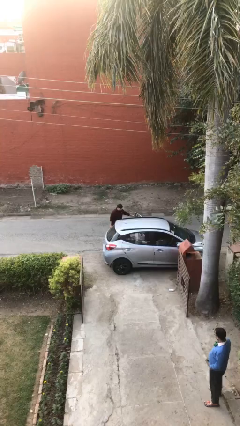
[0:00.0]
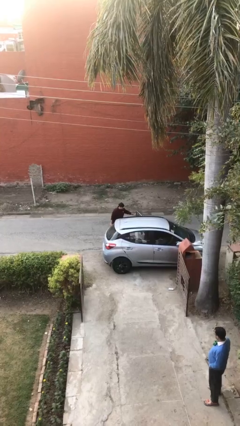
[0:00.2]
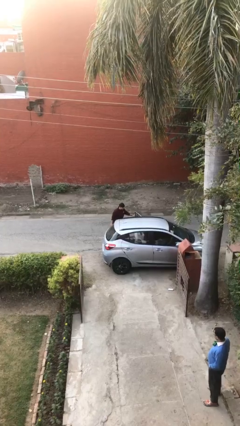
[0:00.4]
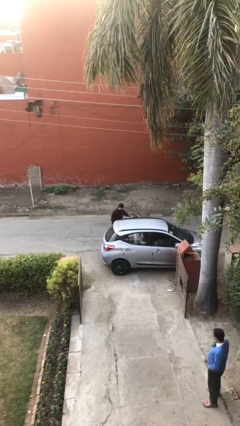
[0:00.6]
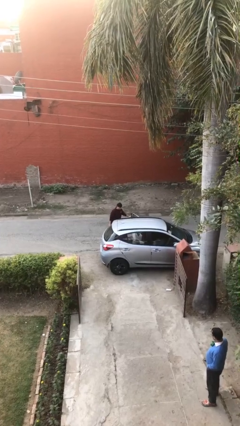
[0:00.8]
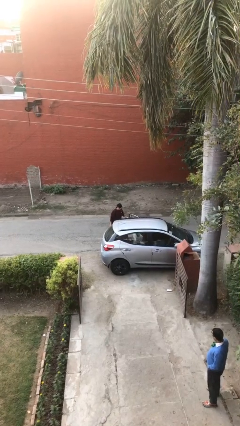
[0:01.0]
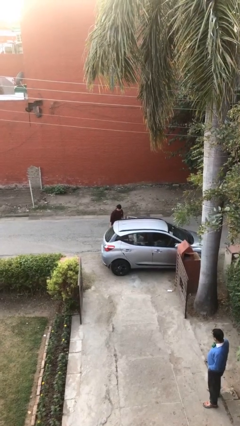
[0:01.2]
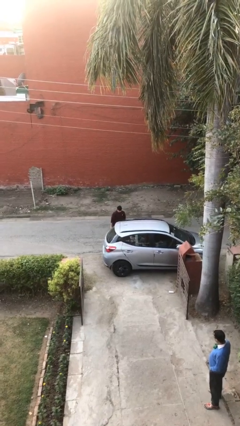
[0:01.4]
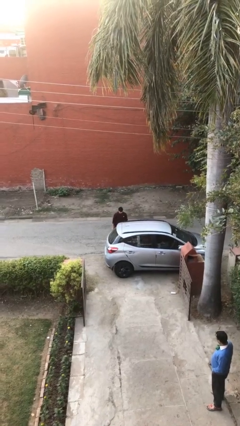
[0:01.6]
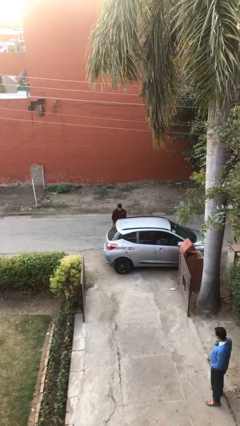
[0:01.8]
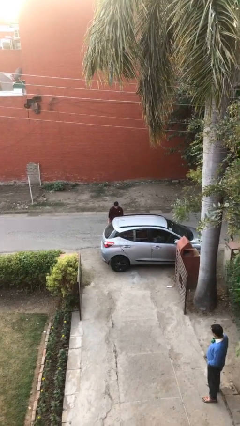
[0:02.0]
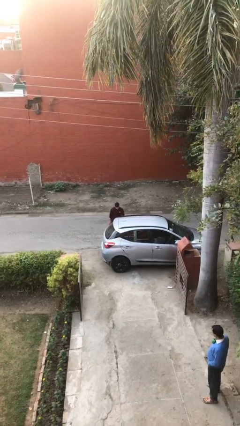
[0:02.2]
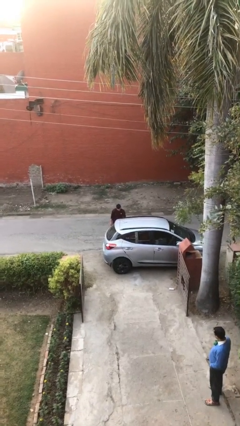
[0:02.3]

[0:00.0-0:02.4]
person closes car door

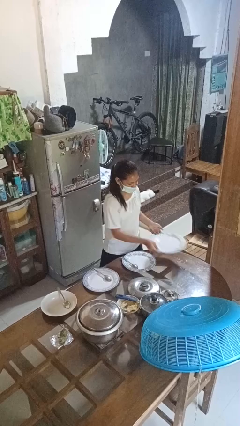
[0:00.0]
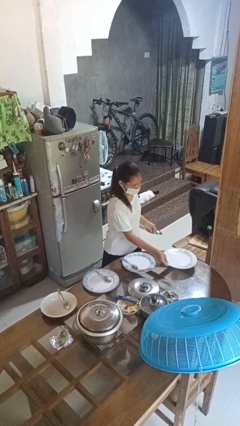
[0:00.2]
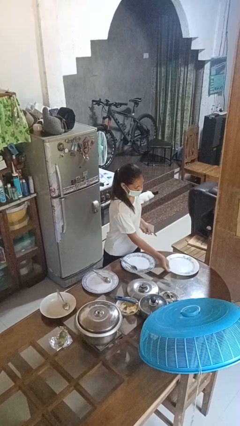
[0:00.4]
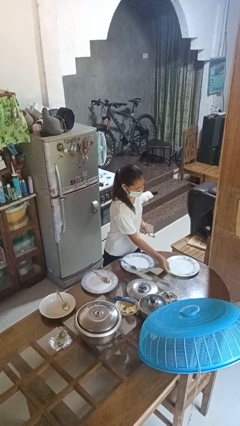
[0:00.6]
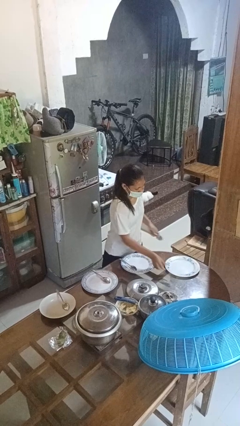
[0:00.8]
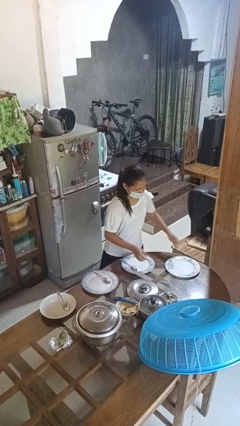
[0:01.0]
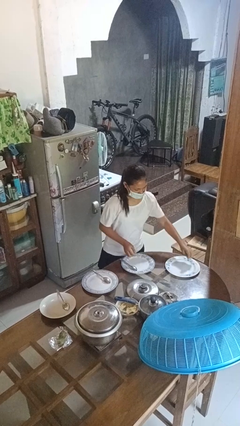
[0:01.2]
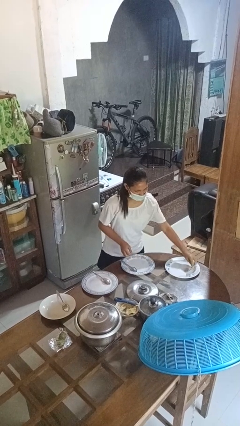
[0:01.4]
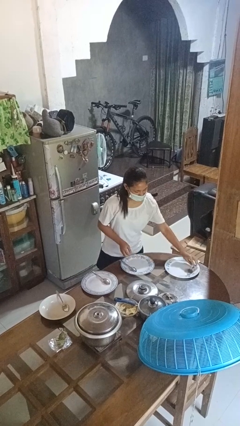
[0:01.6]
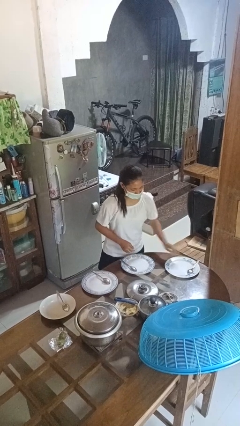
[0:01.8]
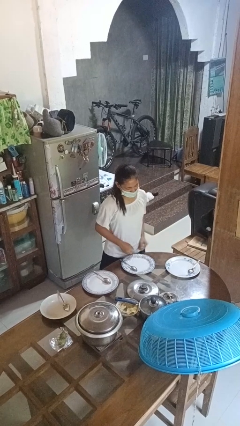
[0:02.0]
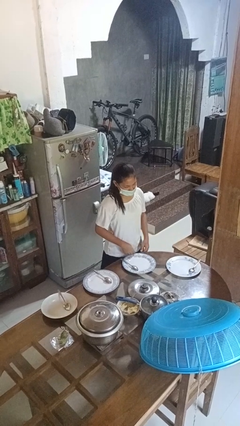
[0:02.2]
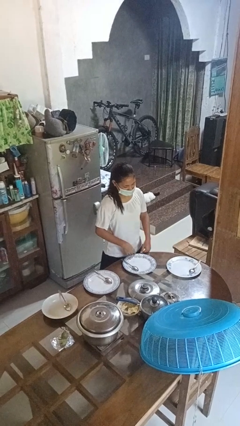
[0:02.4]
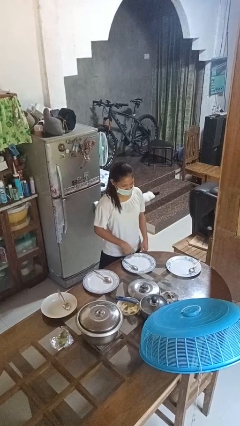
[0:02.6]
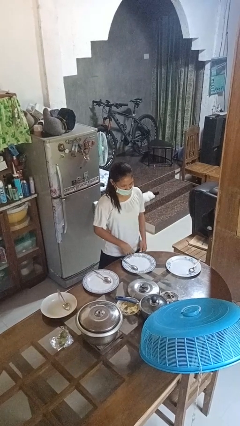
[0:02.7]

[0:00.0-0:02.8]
person sets table

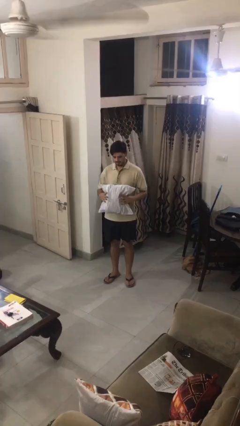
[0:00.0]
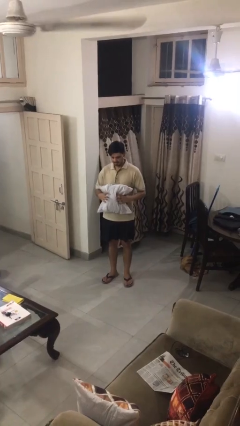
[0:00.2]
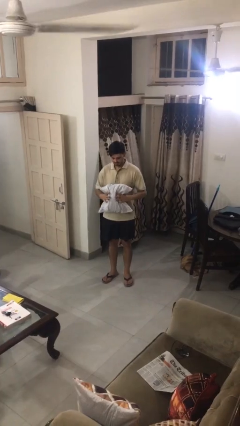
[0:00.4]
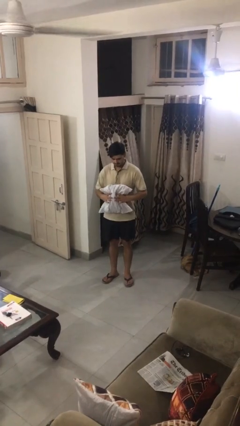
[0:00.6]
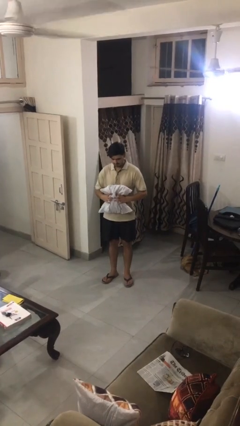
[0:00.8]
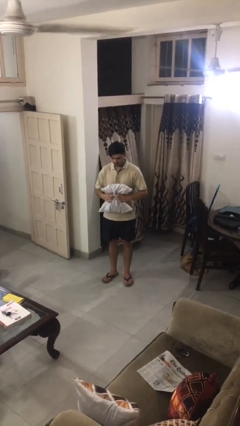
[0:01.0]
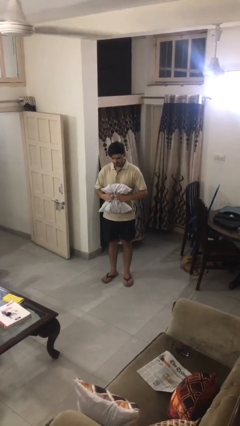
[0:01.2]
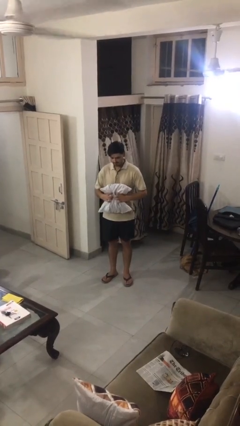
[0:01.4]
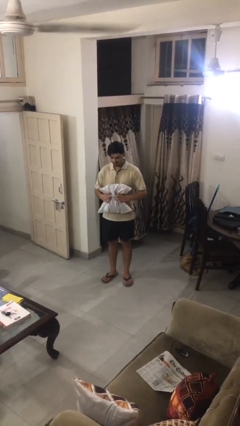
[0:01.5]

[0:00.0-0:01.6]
person squeezes object

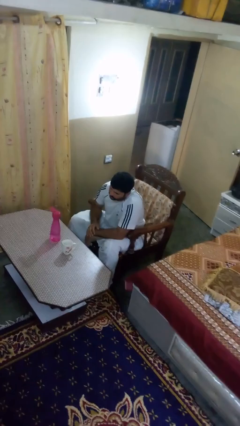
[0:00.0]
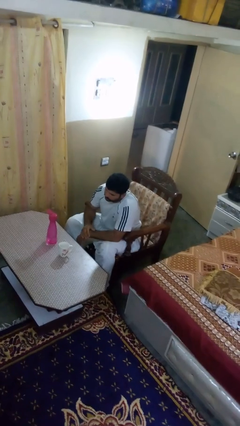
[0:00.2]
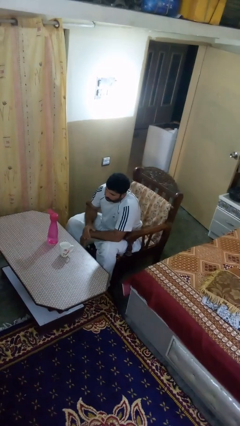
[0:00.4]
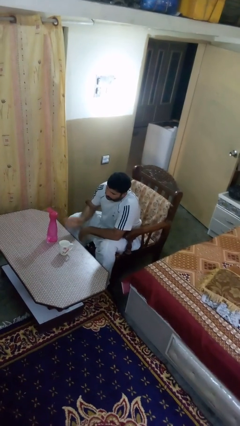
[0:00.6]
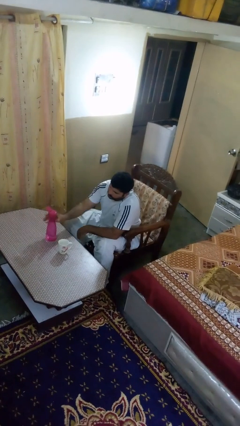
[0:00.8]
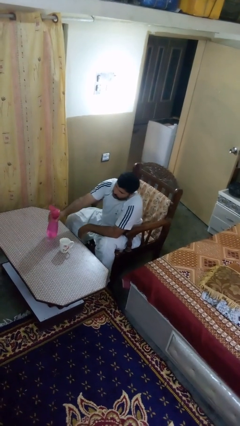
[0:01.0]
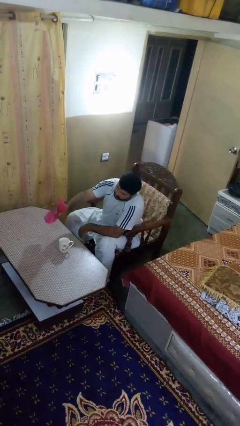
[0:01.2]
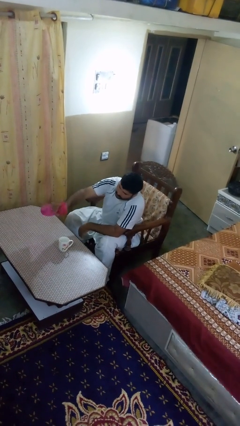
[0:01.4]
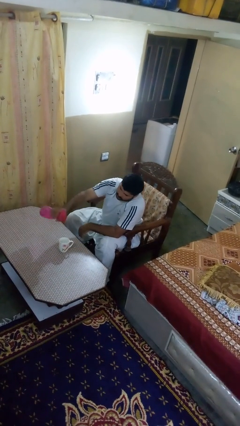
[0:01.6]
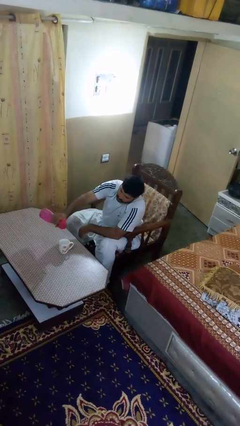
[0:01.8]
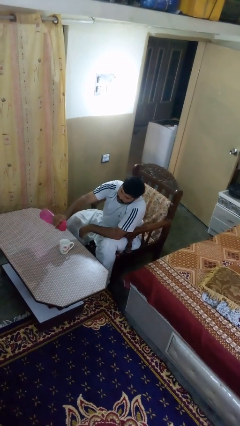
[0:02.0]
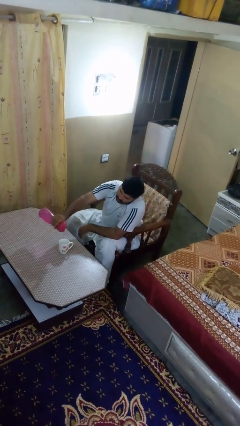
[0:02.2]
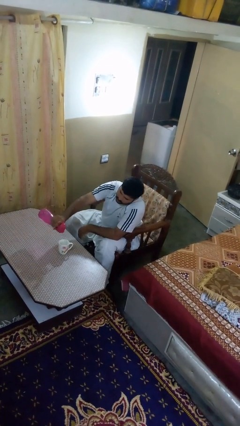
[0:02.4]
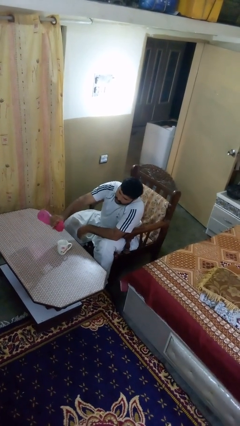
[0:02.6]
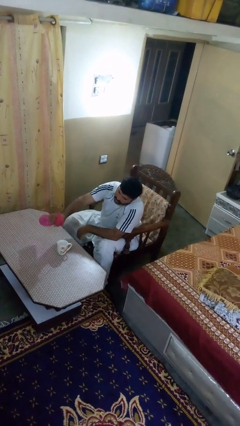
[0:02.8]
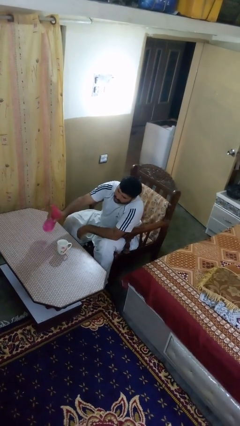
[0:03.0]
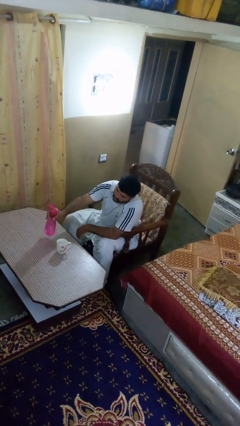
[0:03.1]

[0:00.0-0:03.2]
person pours liquid into cup

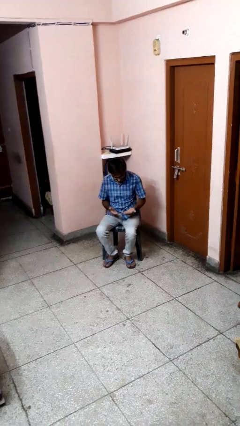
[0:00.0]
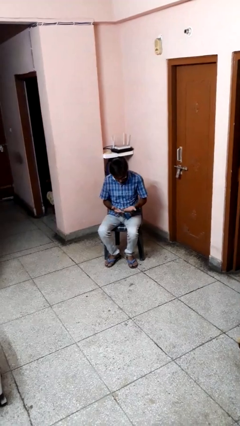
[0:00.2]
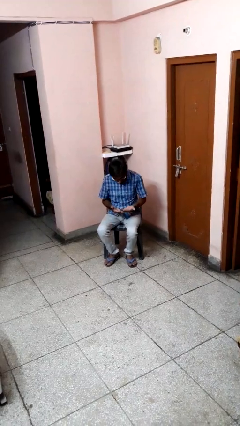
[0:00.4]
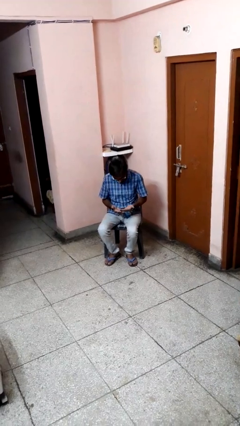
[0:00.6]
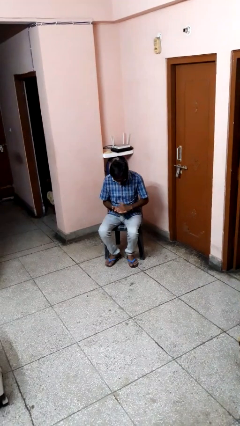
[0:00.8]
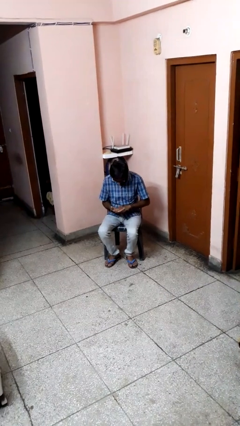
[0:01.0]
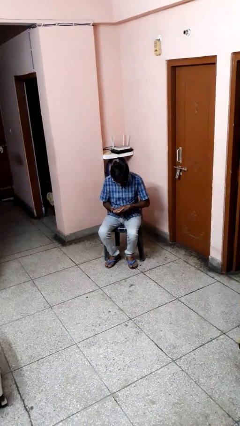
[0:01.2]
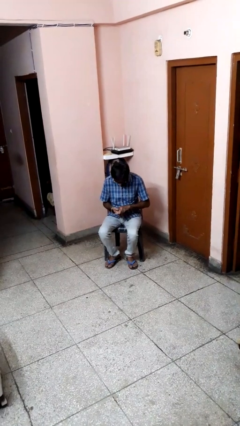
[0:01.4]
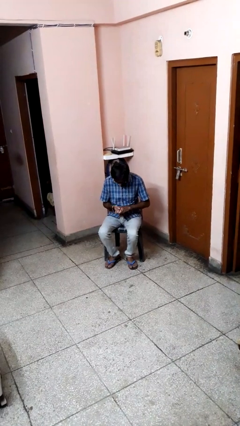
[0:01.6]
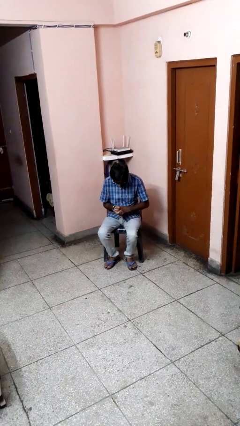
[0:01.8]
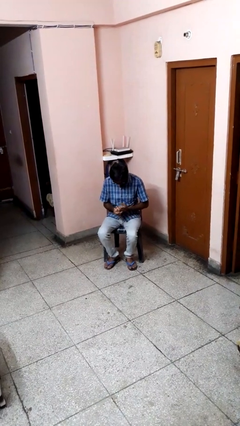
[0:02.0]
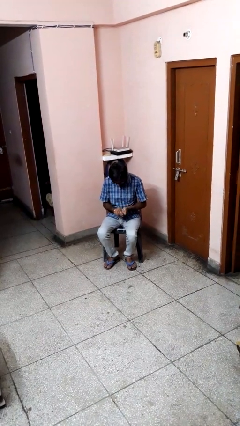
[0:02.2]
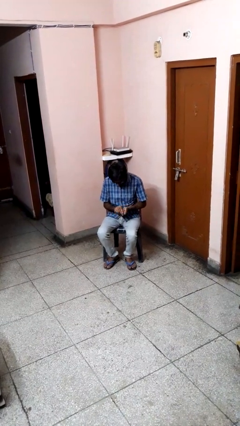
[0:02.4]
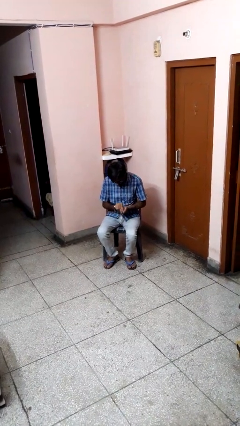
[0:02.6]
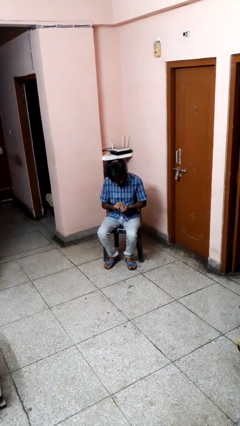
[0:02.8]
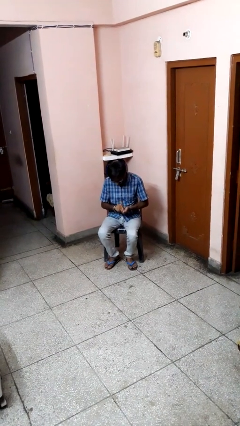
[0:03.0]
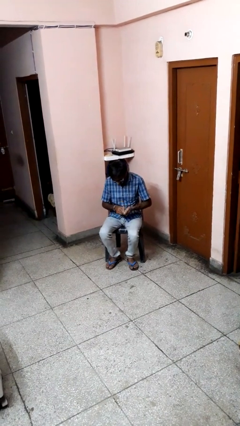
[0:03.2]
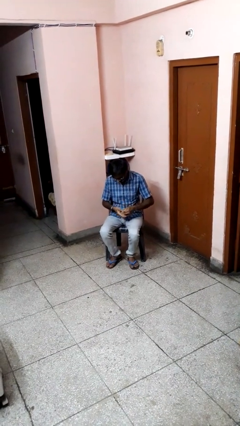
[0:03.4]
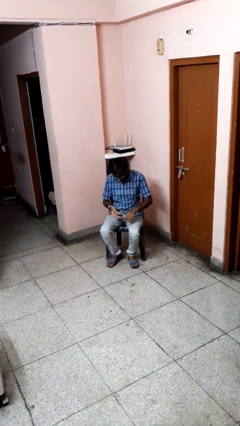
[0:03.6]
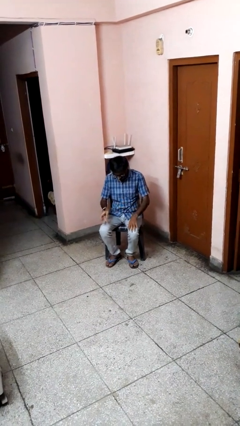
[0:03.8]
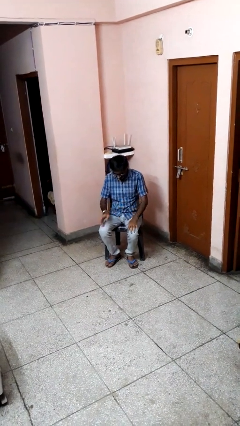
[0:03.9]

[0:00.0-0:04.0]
person looks at hands in lap

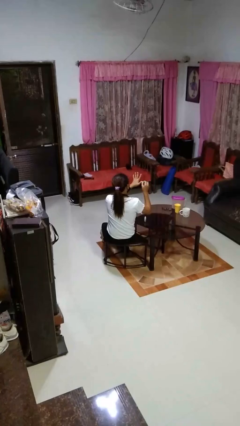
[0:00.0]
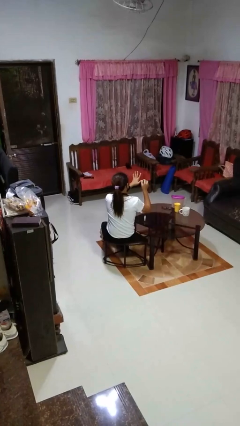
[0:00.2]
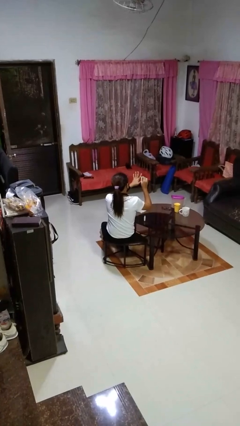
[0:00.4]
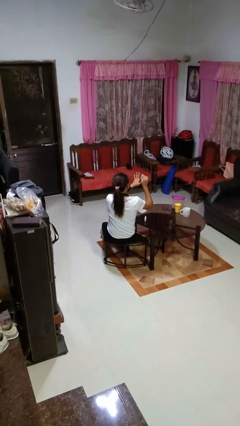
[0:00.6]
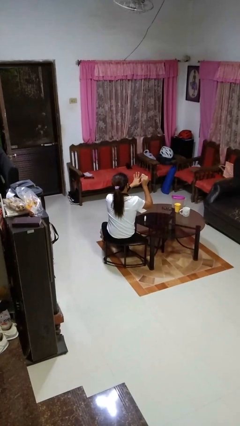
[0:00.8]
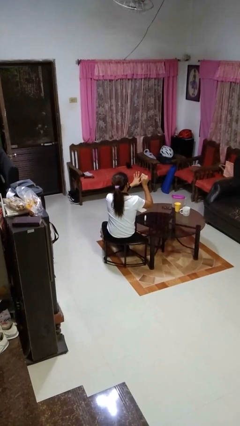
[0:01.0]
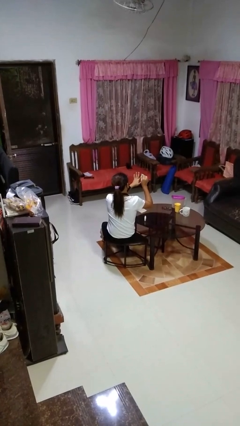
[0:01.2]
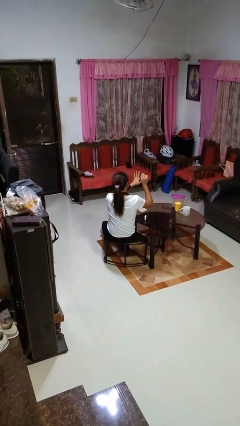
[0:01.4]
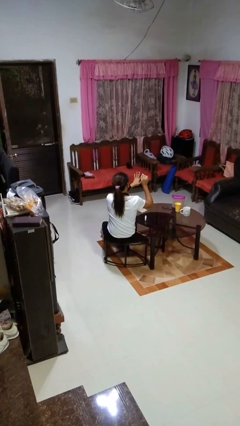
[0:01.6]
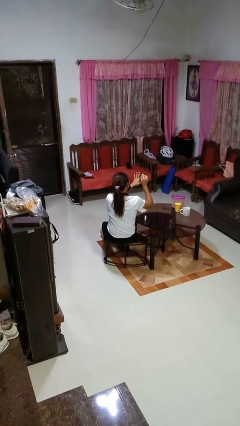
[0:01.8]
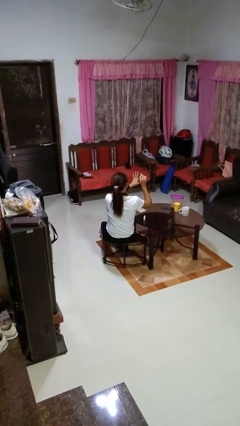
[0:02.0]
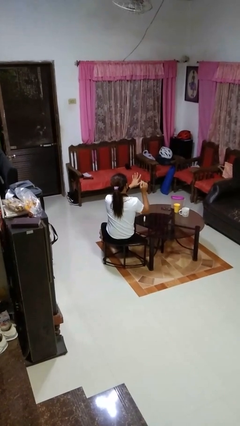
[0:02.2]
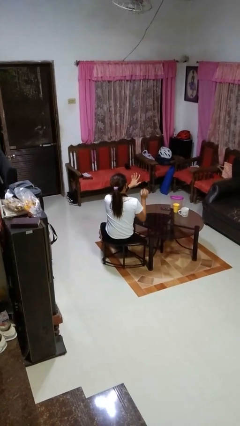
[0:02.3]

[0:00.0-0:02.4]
person paints fingernails

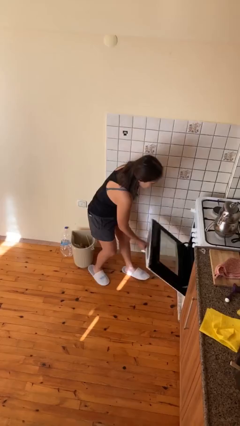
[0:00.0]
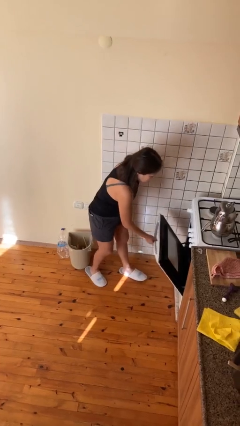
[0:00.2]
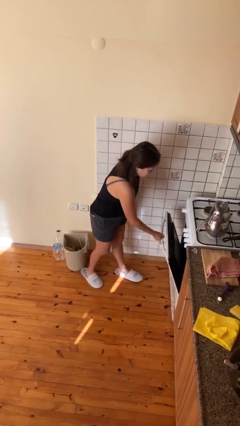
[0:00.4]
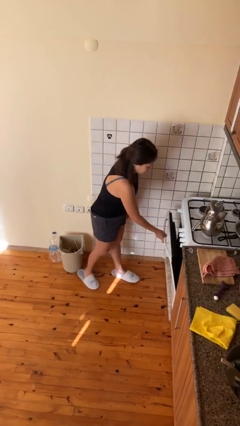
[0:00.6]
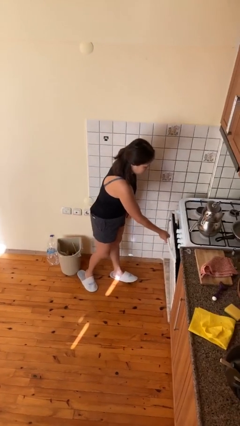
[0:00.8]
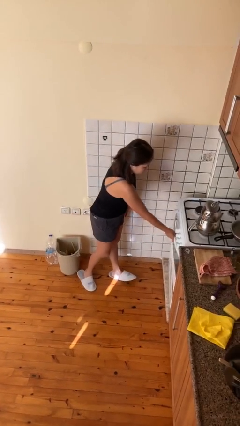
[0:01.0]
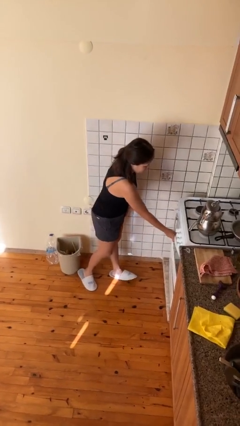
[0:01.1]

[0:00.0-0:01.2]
person closes oven door
